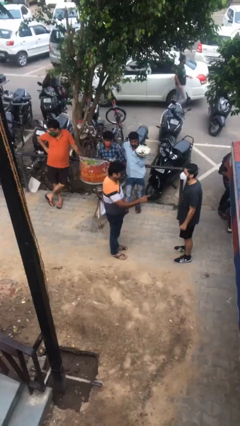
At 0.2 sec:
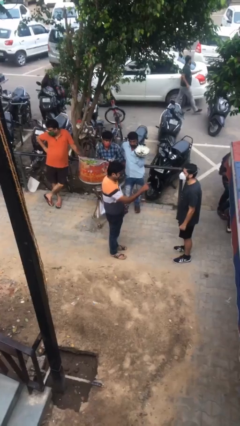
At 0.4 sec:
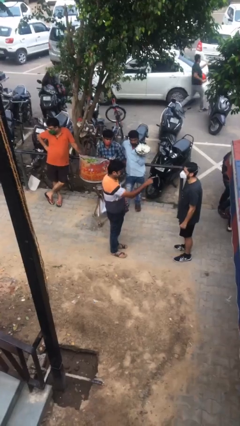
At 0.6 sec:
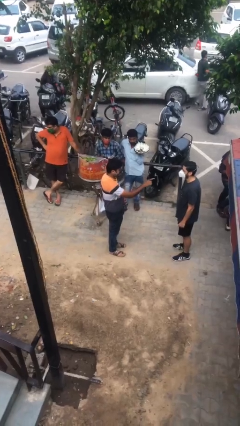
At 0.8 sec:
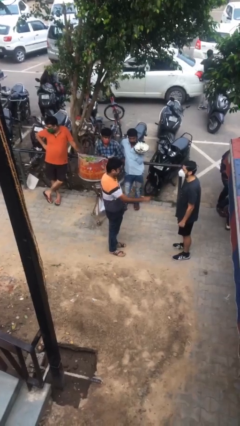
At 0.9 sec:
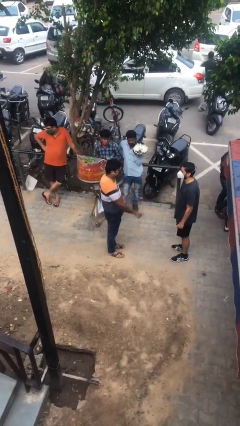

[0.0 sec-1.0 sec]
person points at person

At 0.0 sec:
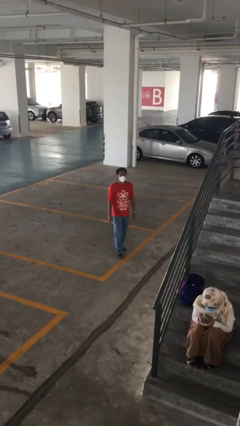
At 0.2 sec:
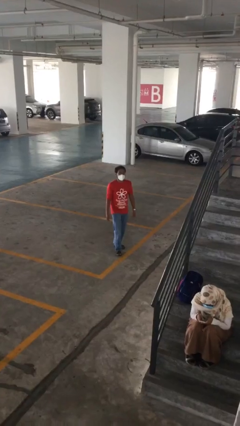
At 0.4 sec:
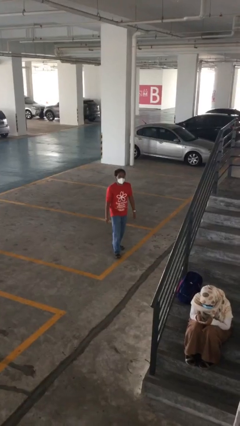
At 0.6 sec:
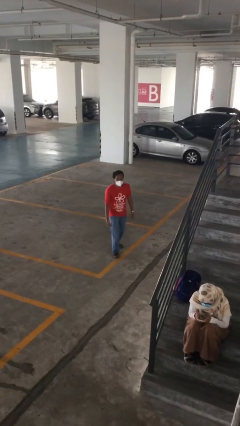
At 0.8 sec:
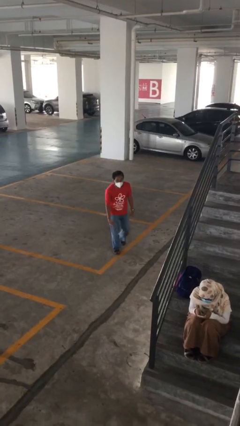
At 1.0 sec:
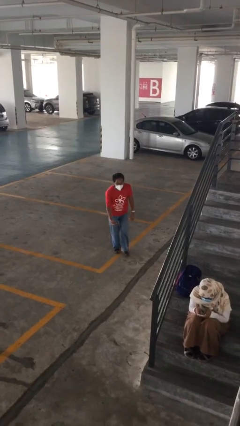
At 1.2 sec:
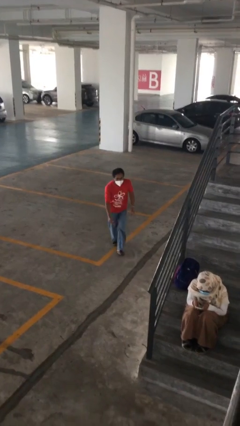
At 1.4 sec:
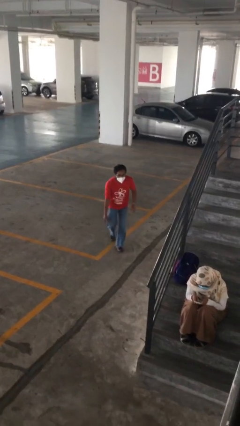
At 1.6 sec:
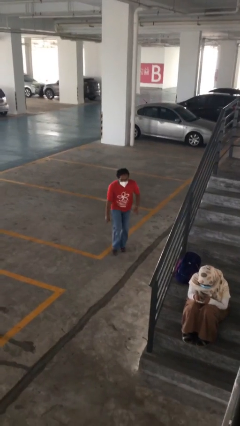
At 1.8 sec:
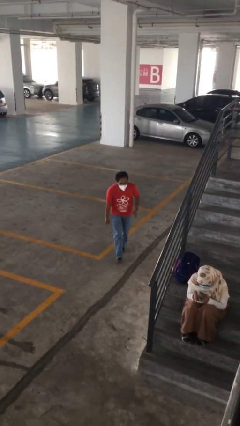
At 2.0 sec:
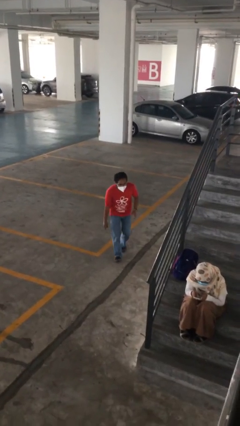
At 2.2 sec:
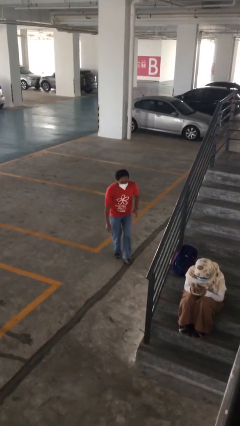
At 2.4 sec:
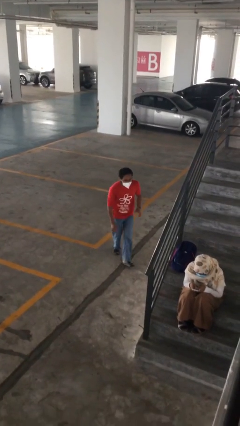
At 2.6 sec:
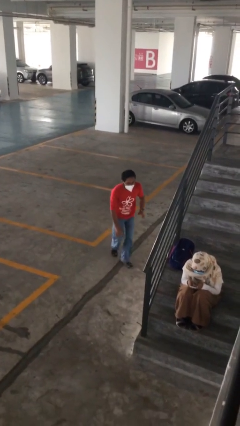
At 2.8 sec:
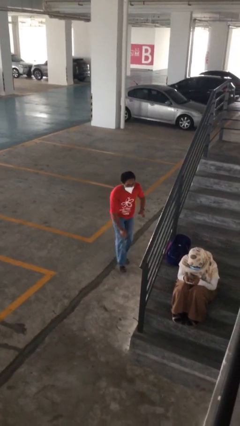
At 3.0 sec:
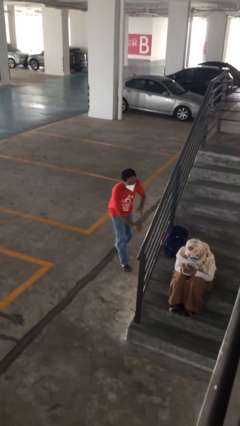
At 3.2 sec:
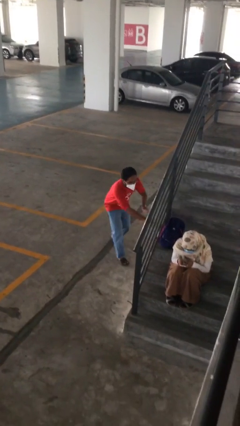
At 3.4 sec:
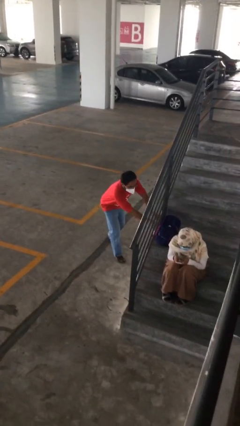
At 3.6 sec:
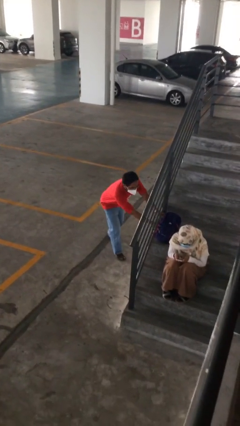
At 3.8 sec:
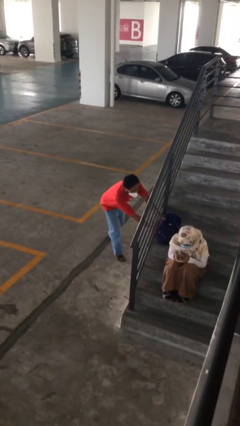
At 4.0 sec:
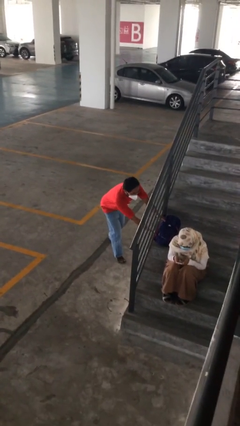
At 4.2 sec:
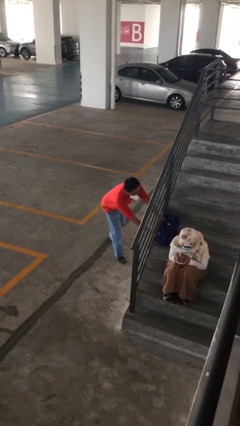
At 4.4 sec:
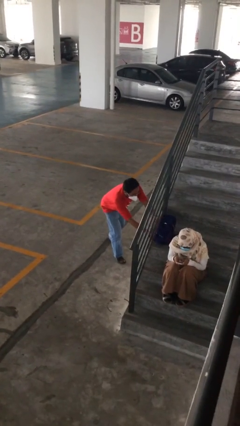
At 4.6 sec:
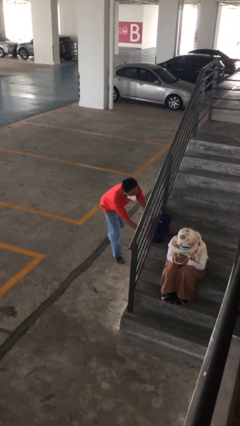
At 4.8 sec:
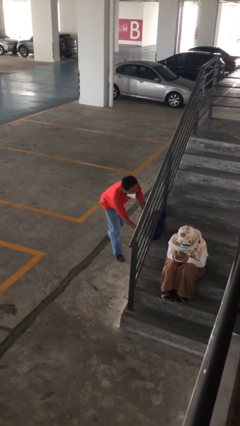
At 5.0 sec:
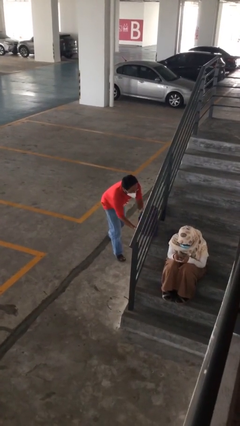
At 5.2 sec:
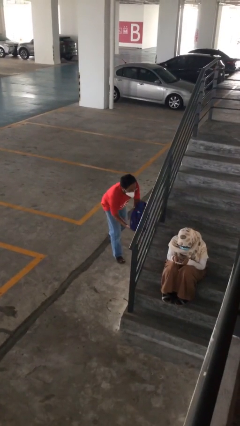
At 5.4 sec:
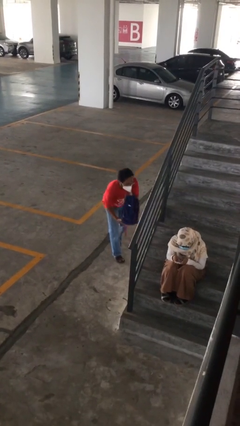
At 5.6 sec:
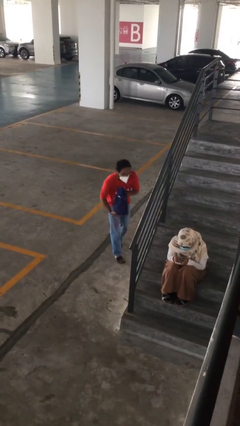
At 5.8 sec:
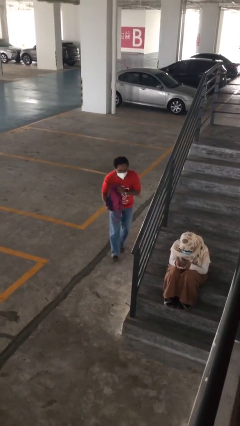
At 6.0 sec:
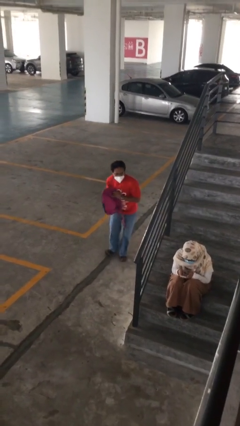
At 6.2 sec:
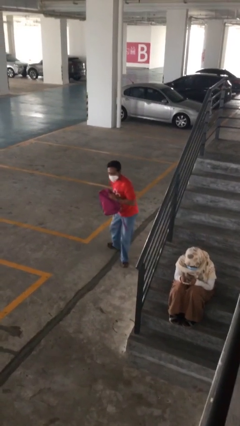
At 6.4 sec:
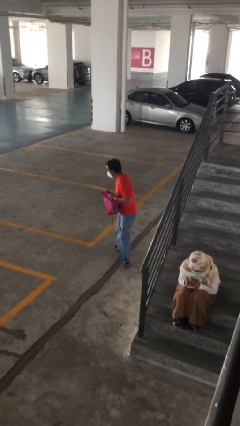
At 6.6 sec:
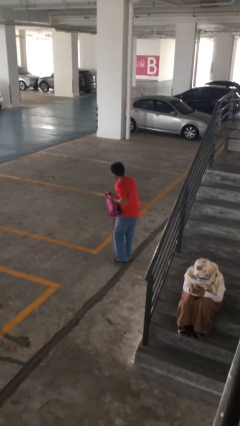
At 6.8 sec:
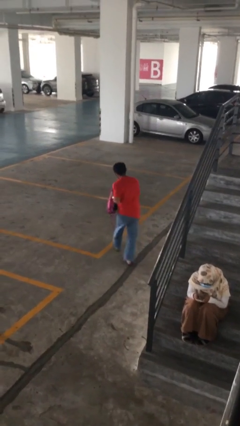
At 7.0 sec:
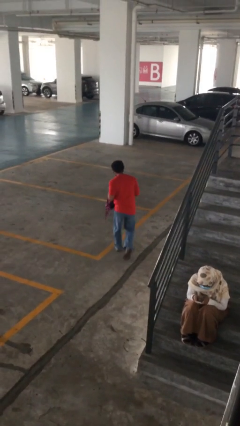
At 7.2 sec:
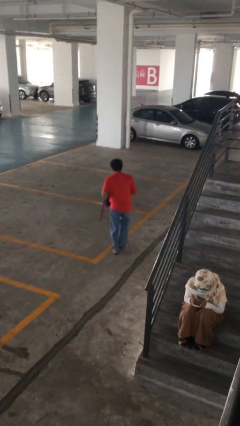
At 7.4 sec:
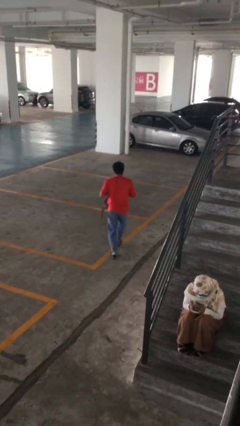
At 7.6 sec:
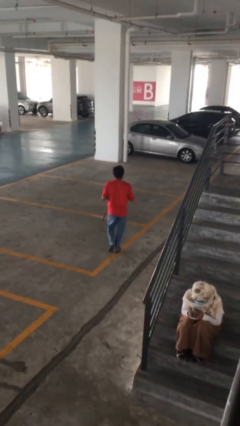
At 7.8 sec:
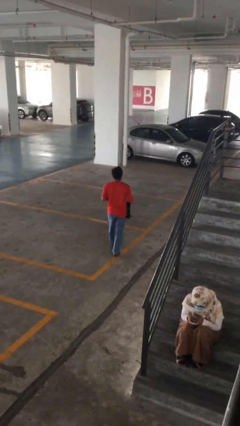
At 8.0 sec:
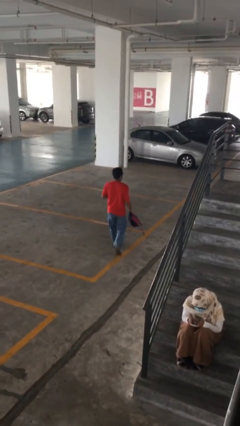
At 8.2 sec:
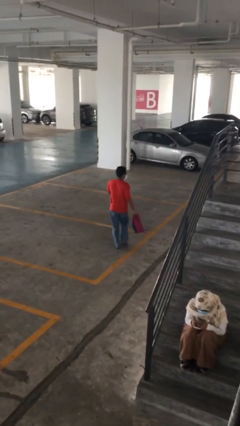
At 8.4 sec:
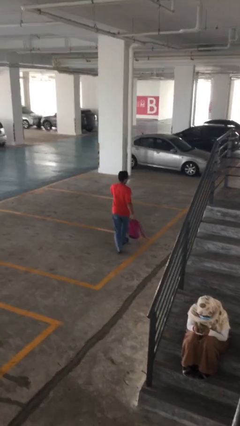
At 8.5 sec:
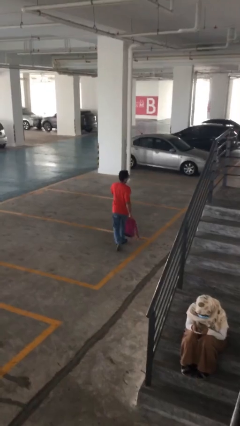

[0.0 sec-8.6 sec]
person steals object from person

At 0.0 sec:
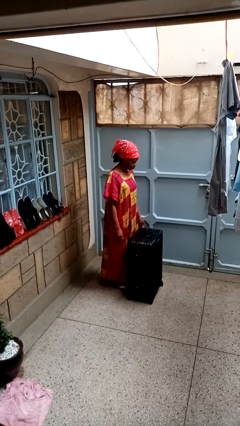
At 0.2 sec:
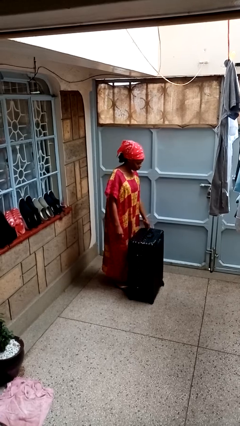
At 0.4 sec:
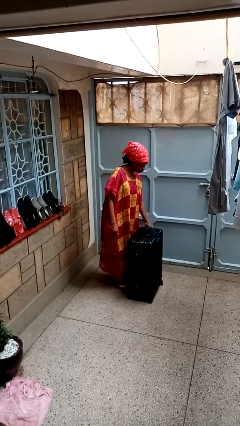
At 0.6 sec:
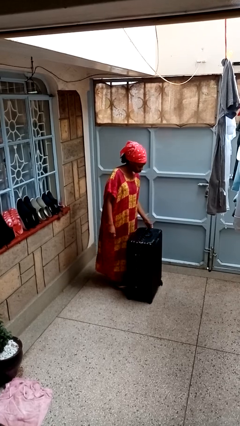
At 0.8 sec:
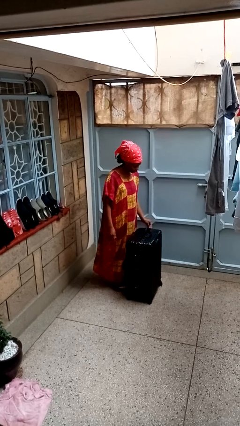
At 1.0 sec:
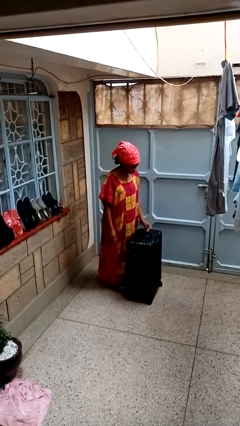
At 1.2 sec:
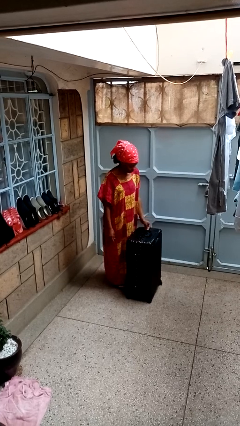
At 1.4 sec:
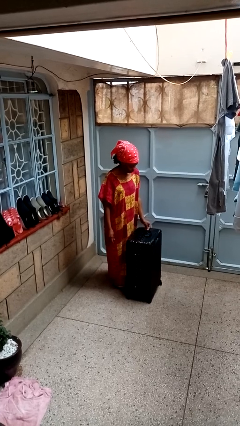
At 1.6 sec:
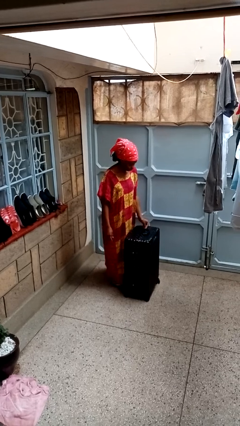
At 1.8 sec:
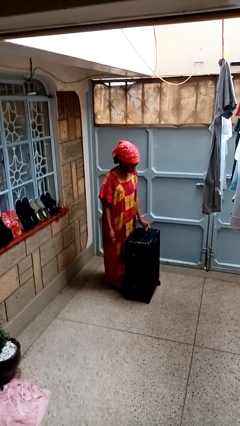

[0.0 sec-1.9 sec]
person opens suitcase

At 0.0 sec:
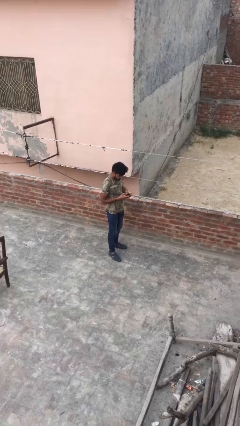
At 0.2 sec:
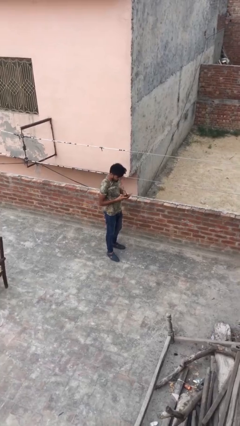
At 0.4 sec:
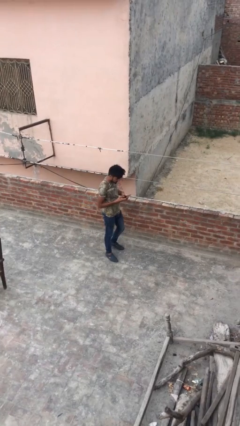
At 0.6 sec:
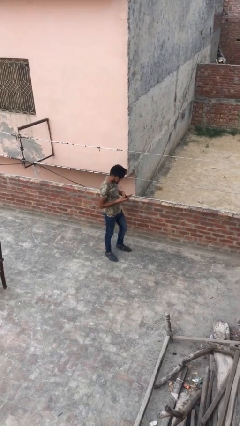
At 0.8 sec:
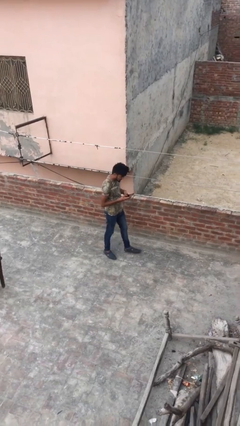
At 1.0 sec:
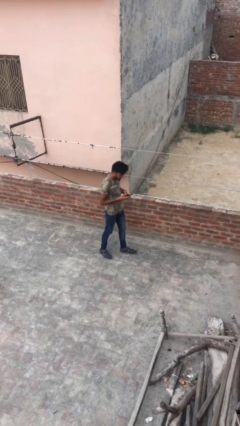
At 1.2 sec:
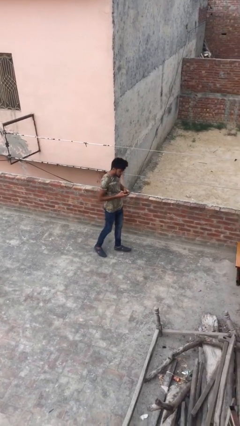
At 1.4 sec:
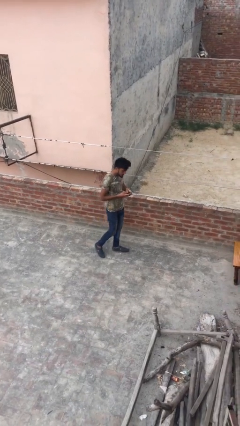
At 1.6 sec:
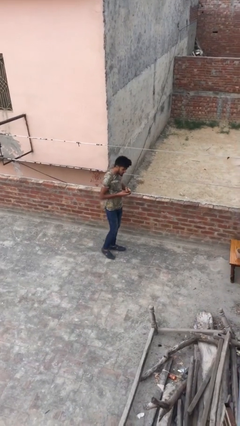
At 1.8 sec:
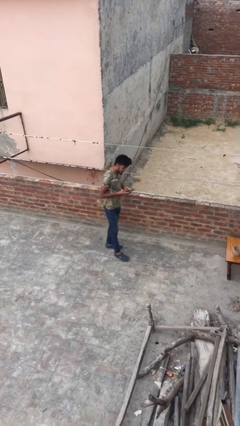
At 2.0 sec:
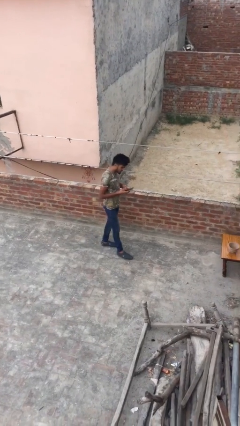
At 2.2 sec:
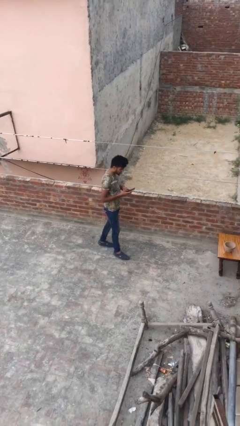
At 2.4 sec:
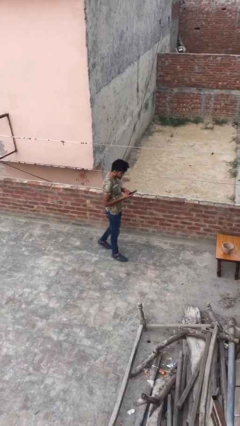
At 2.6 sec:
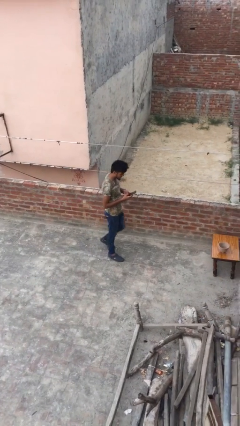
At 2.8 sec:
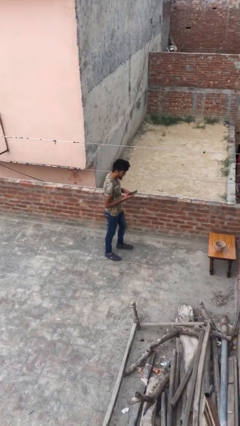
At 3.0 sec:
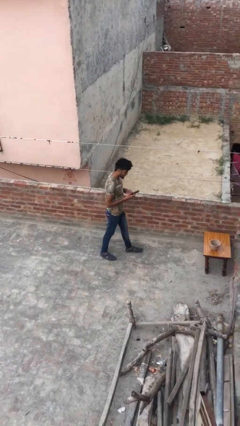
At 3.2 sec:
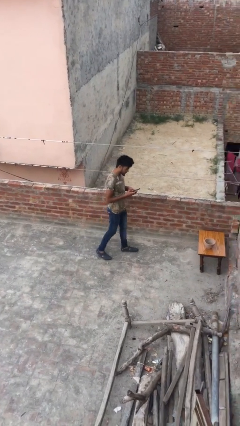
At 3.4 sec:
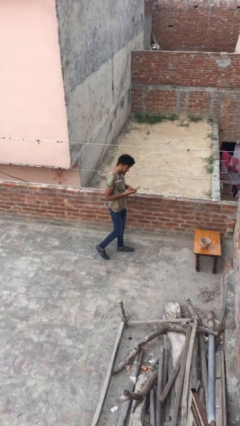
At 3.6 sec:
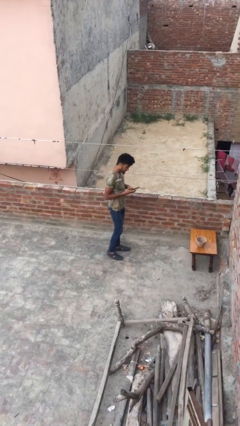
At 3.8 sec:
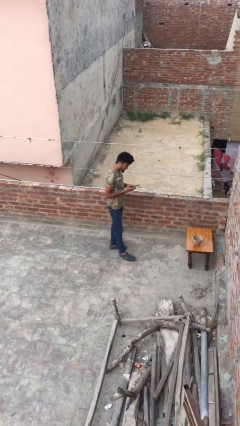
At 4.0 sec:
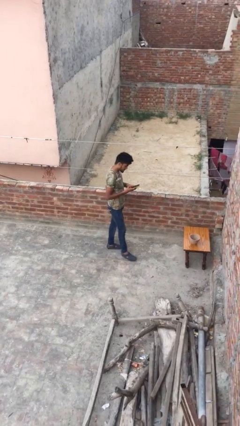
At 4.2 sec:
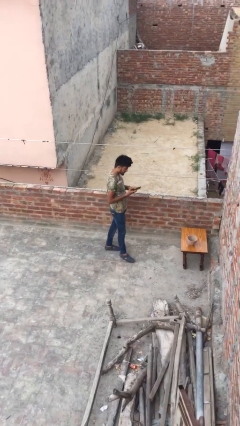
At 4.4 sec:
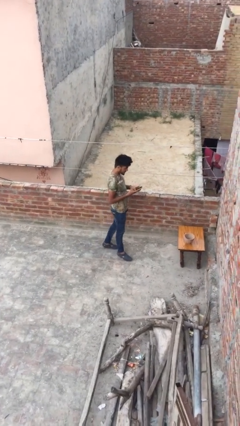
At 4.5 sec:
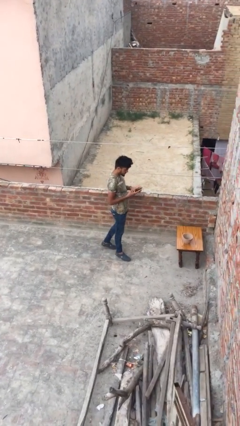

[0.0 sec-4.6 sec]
person texts on phone

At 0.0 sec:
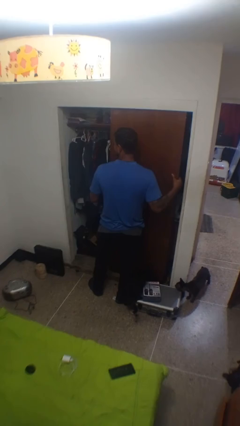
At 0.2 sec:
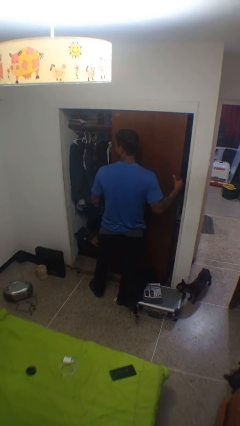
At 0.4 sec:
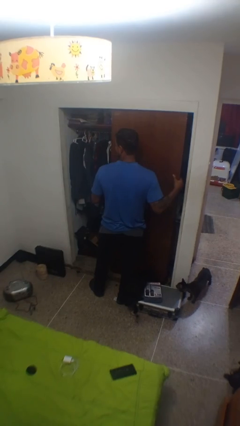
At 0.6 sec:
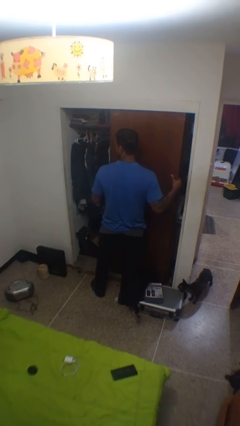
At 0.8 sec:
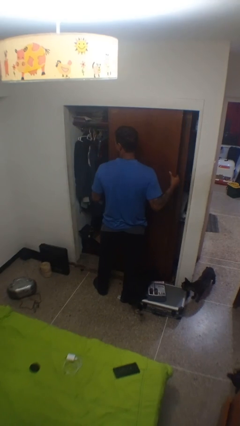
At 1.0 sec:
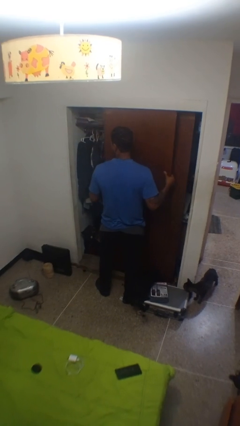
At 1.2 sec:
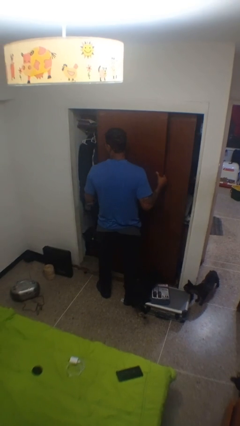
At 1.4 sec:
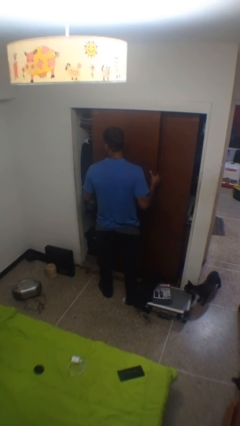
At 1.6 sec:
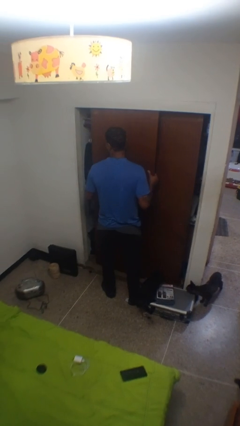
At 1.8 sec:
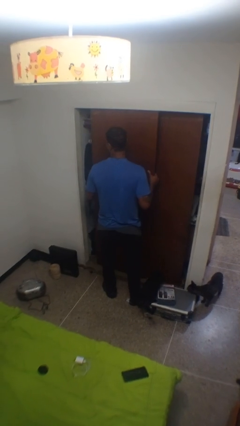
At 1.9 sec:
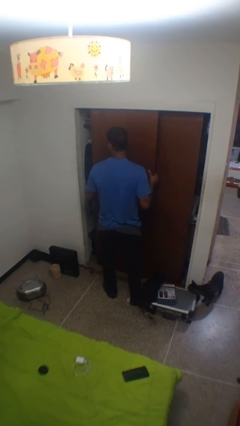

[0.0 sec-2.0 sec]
person closes closet door
